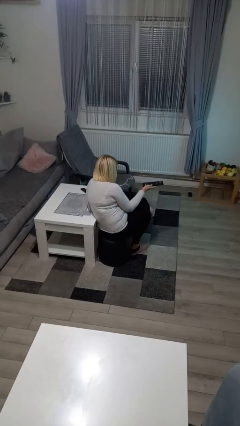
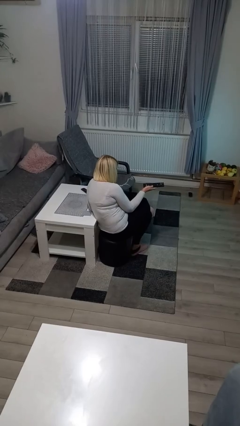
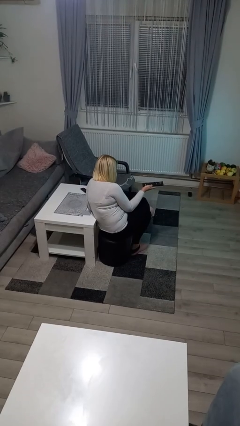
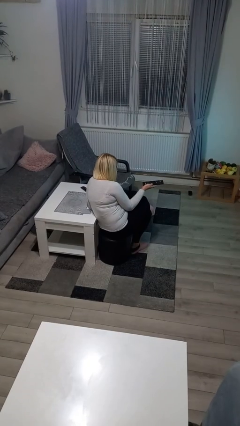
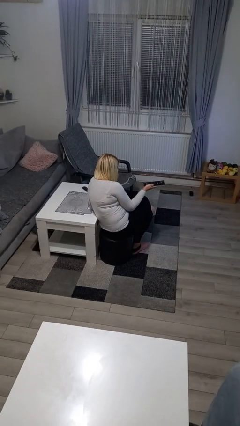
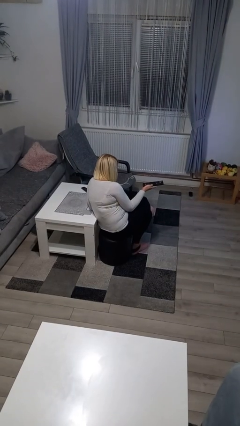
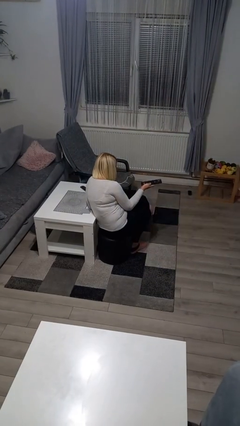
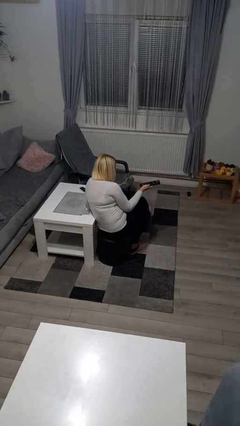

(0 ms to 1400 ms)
person uses television remote

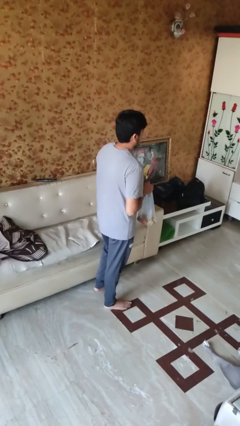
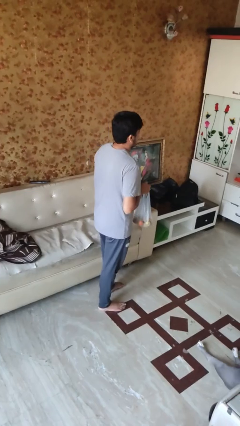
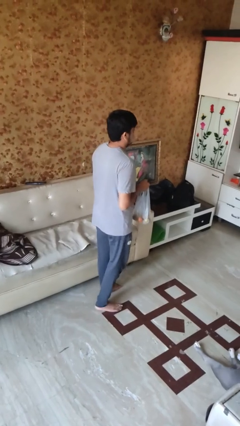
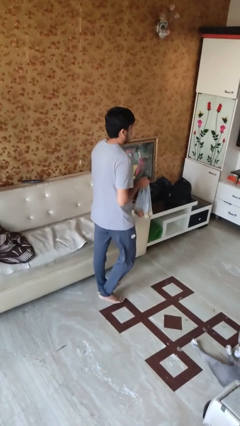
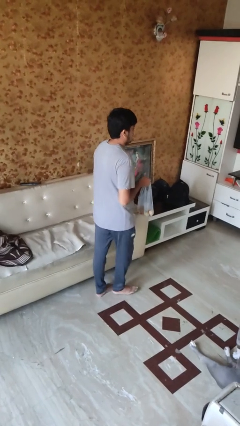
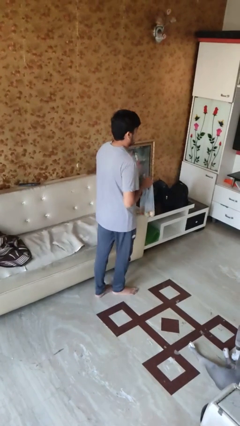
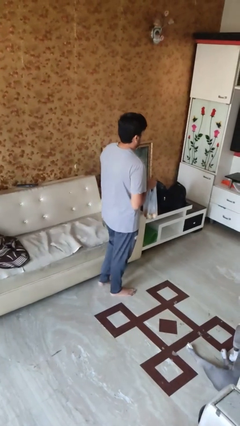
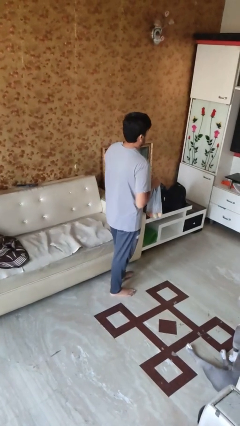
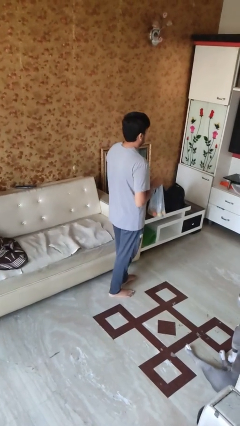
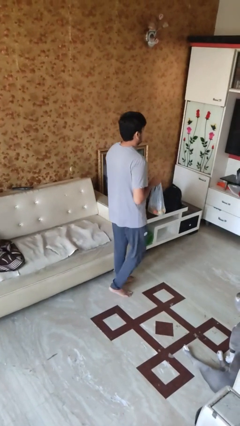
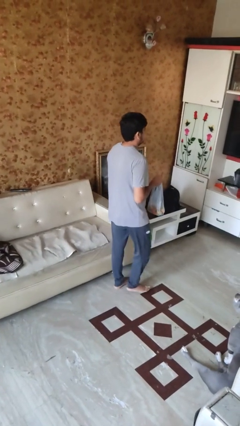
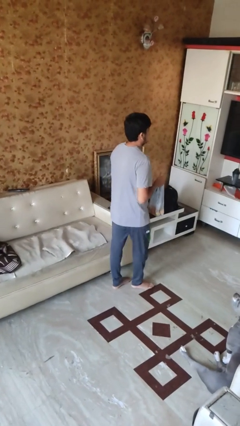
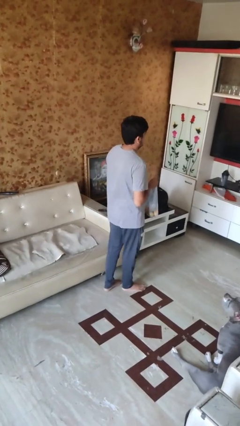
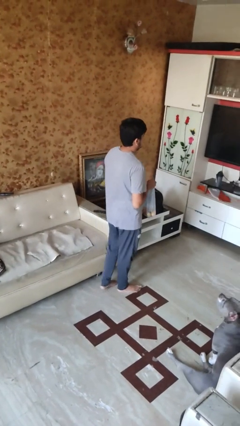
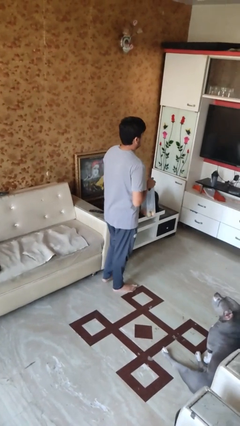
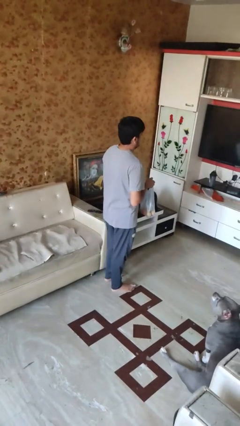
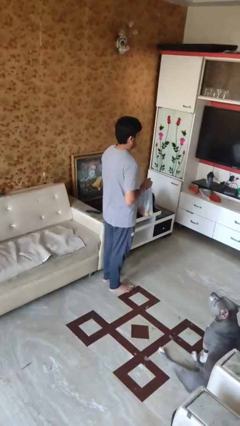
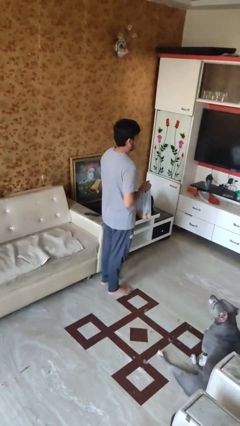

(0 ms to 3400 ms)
person carries groceries

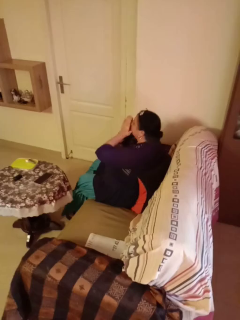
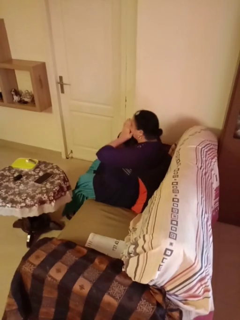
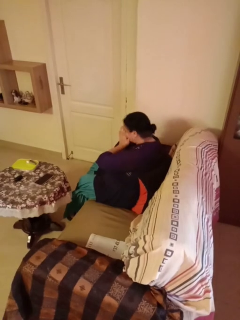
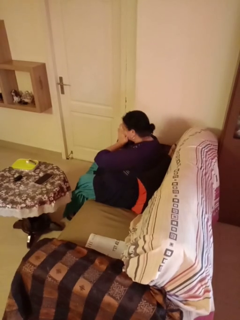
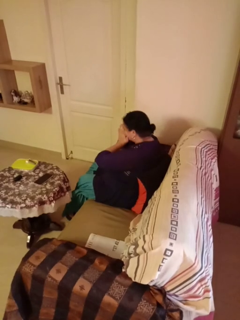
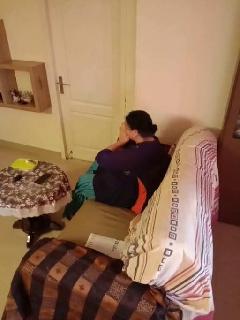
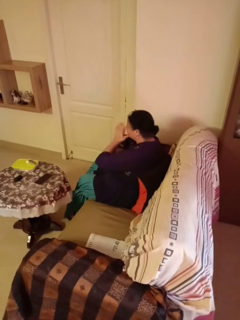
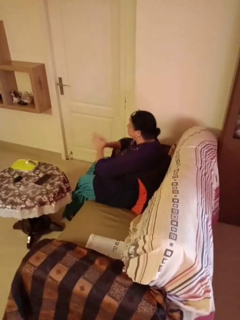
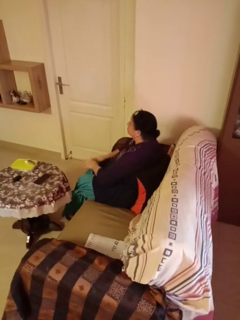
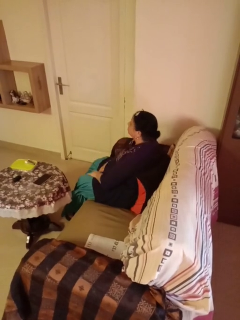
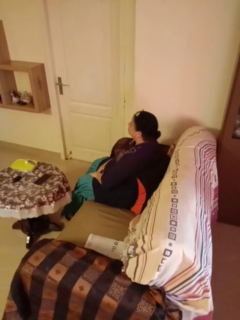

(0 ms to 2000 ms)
person sneezes into hand

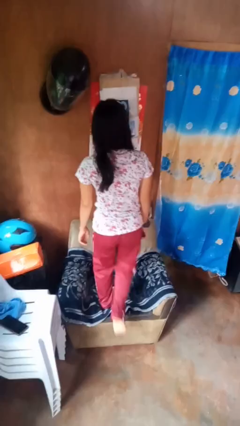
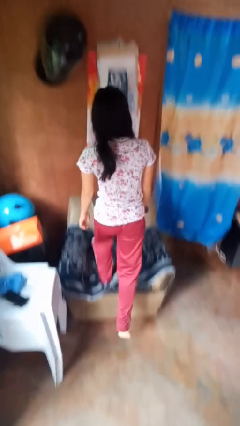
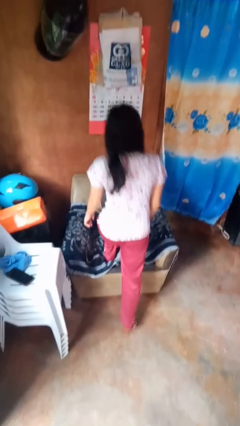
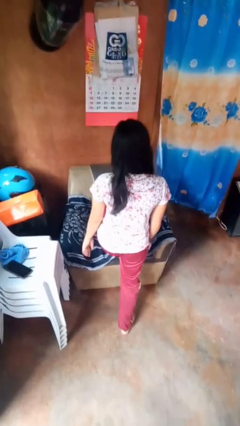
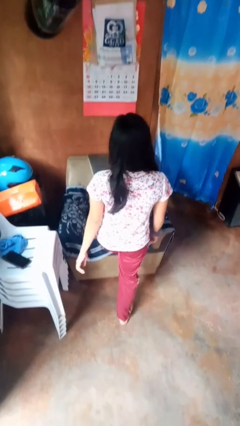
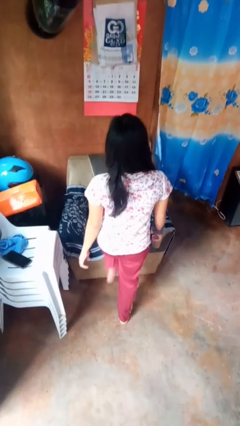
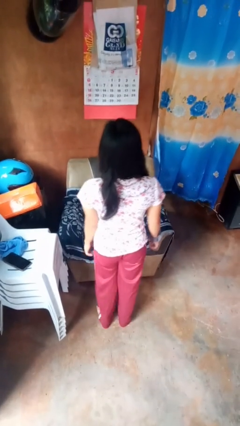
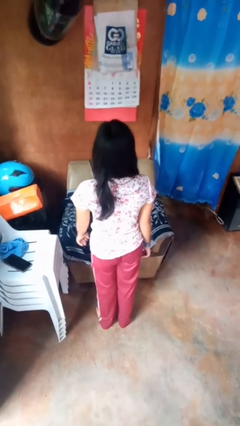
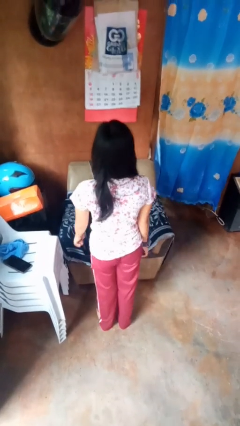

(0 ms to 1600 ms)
person climbs off couch

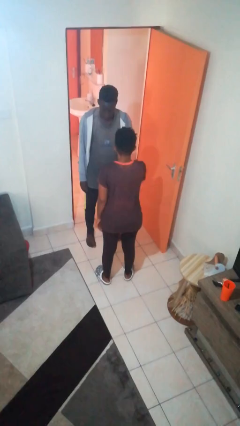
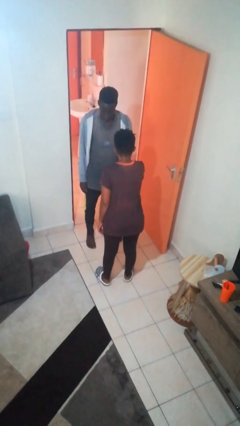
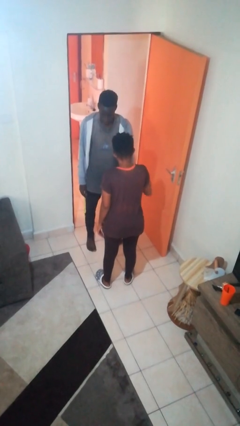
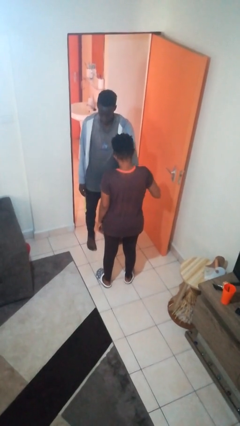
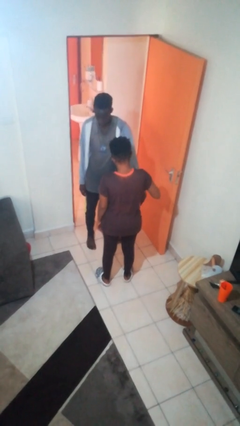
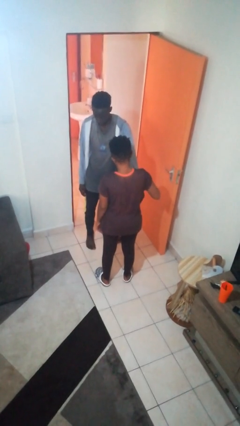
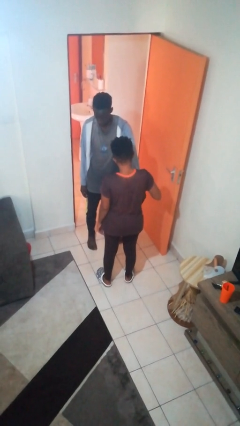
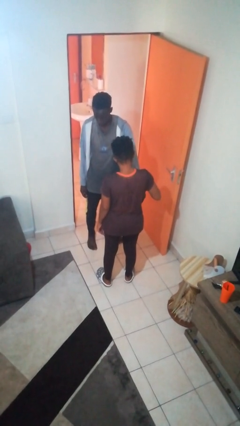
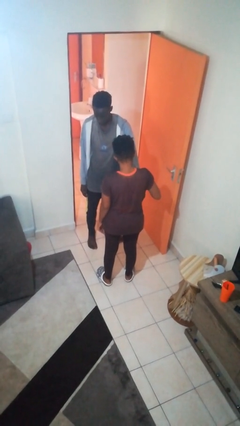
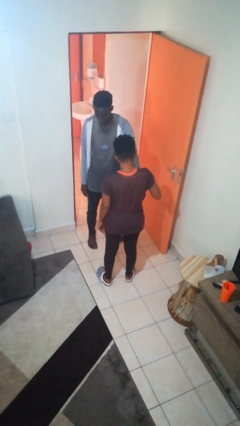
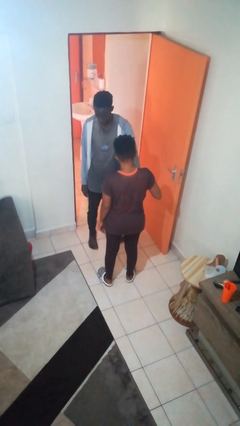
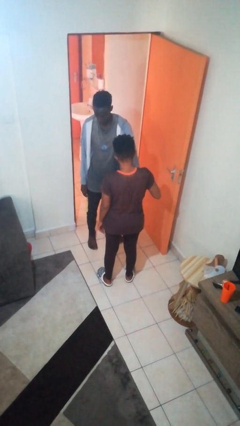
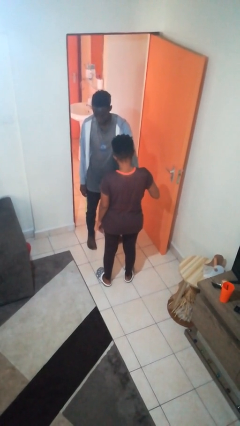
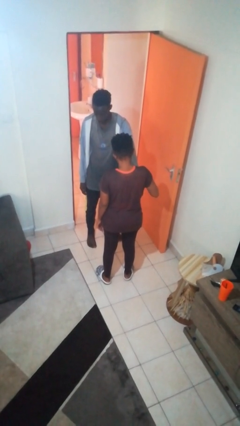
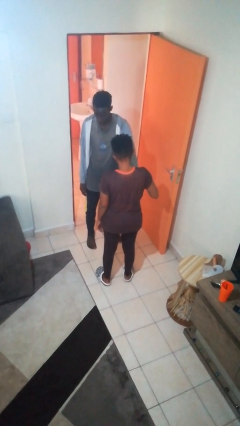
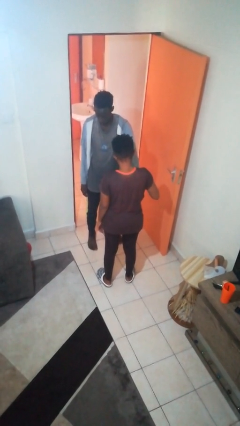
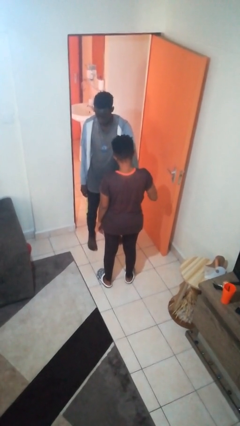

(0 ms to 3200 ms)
person grabs person by forearm

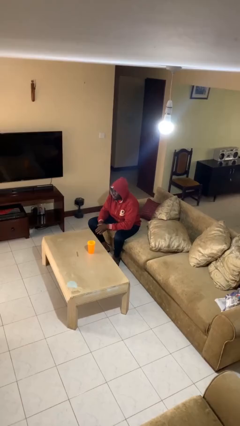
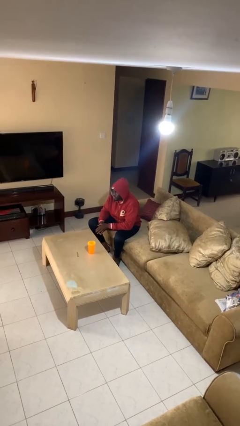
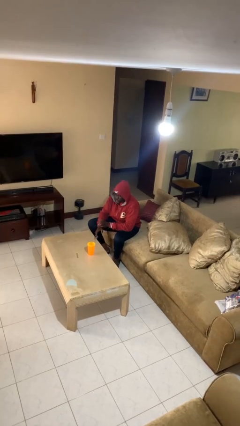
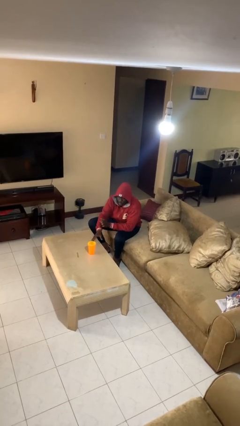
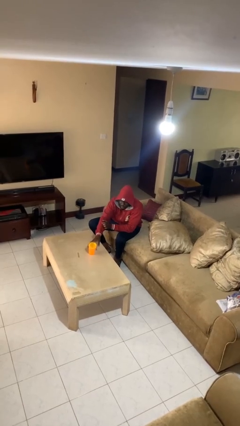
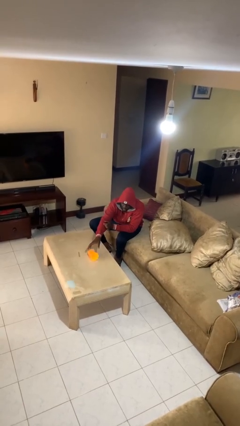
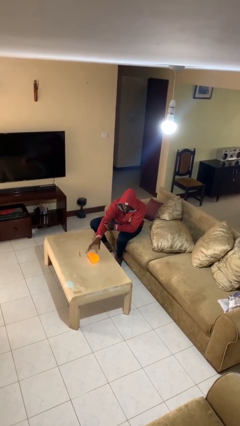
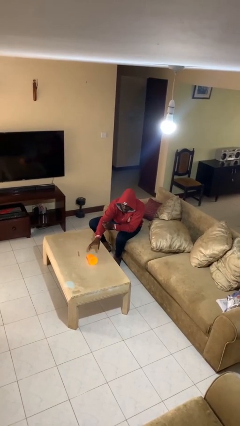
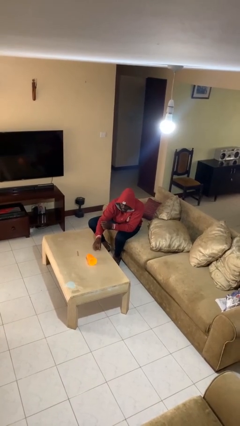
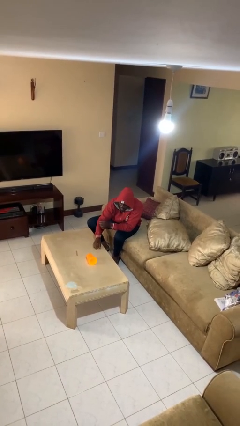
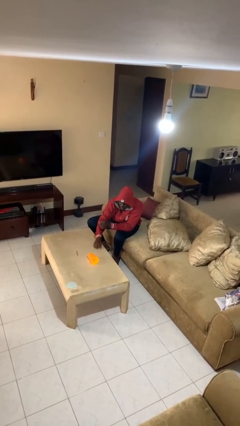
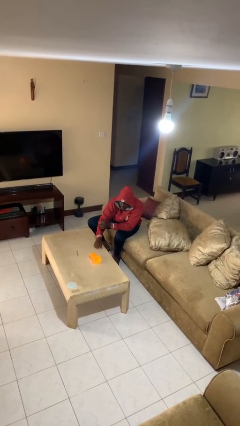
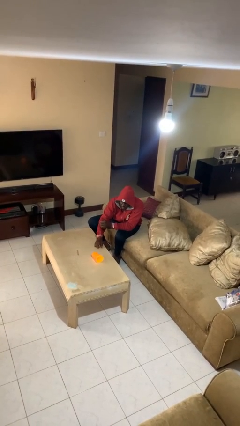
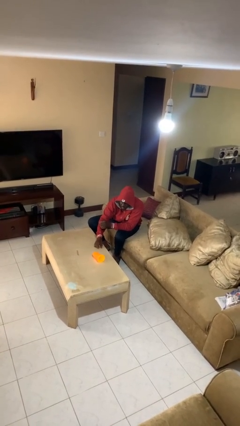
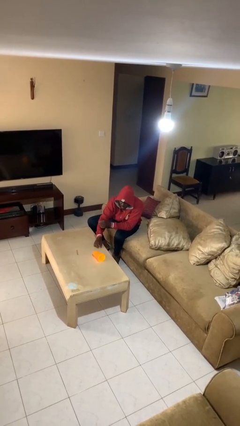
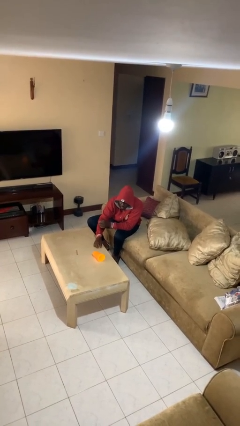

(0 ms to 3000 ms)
person knocks over glass

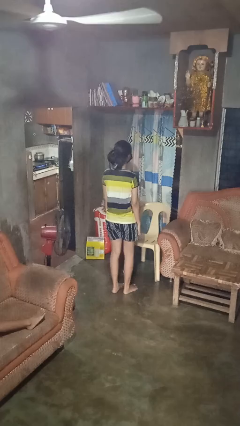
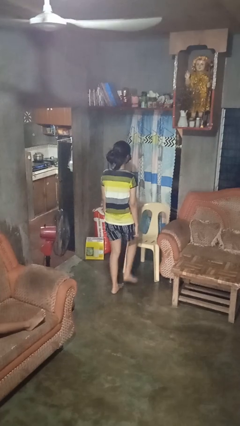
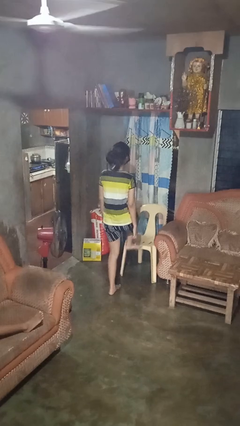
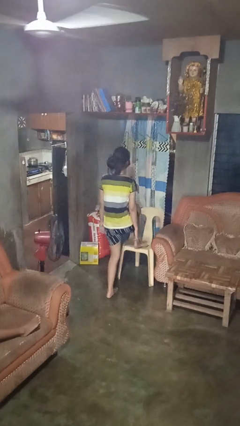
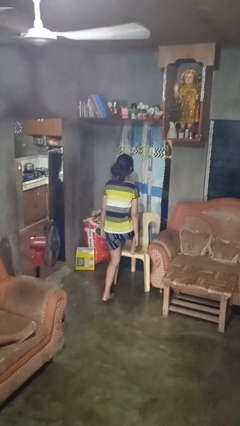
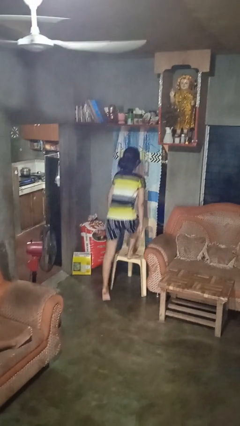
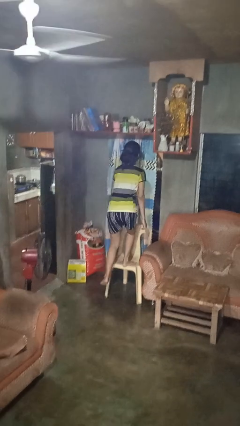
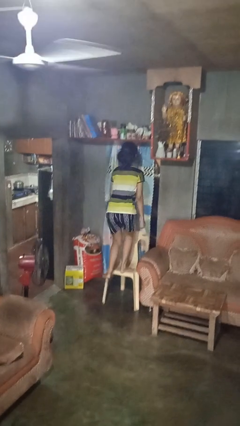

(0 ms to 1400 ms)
person climbs on chair

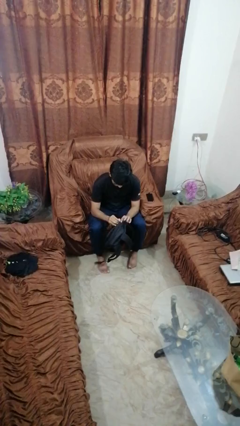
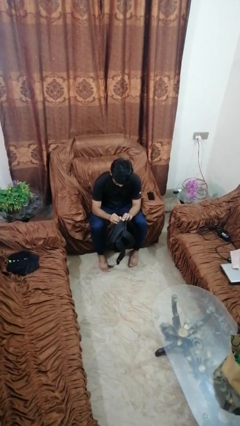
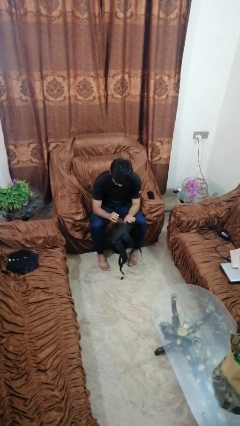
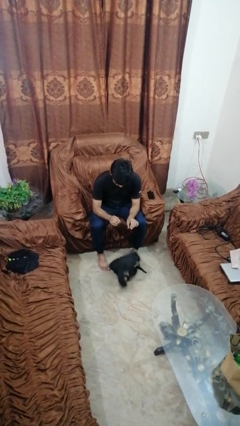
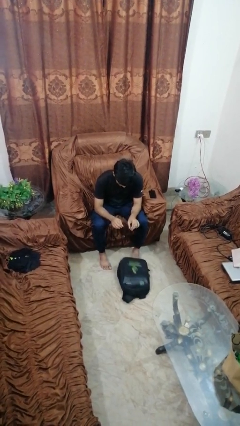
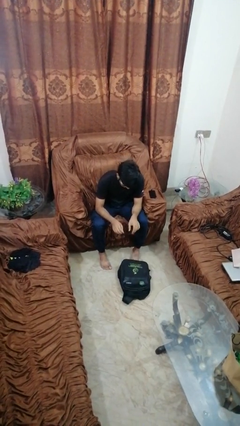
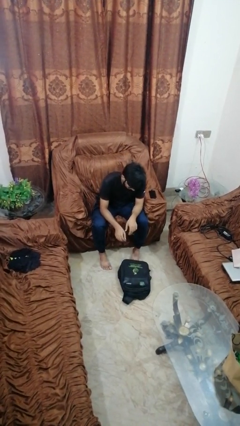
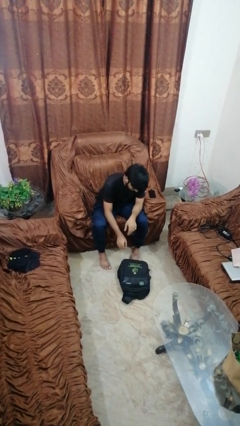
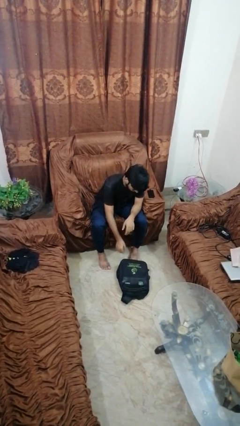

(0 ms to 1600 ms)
person drops object

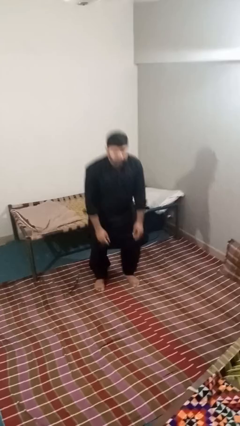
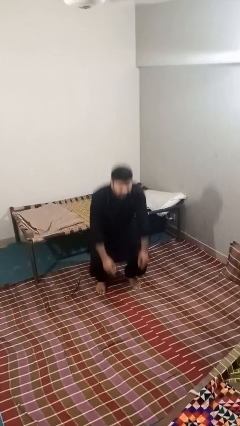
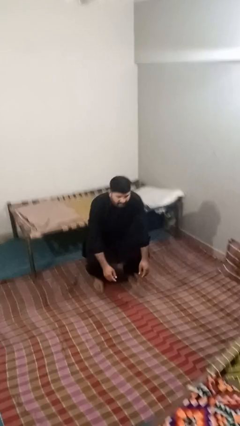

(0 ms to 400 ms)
person stands up
